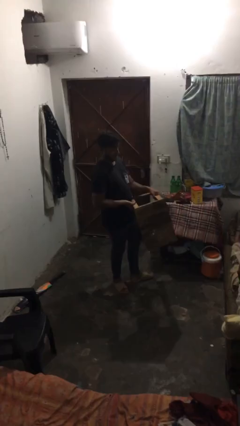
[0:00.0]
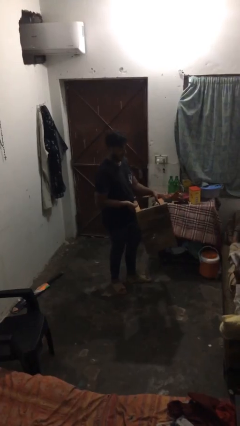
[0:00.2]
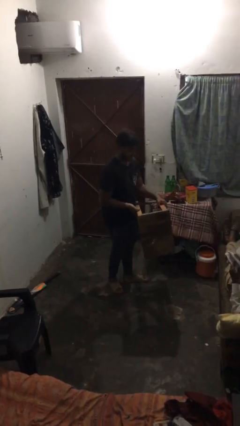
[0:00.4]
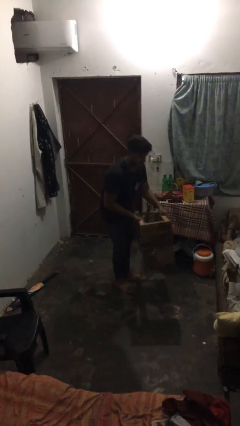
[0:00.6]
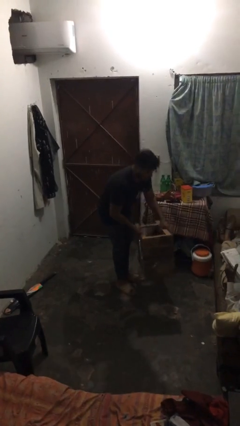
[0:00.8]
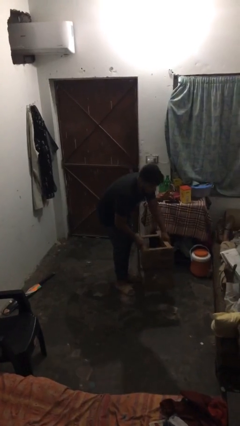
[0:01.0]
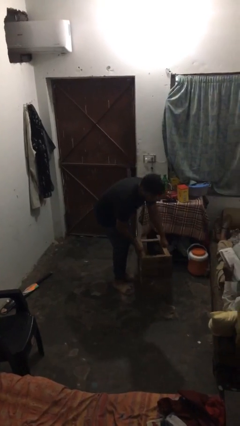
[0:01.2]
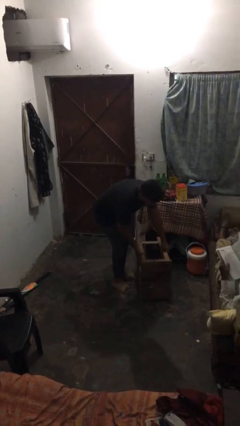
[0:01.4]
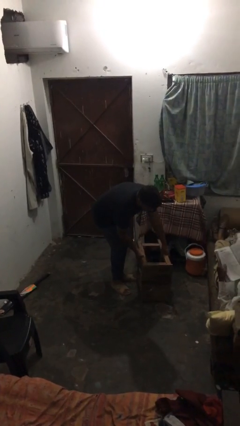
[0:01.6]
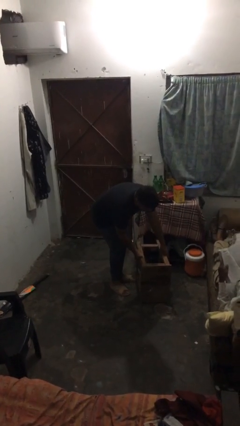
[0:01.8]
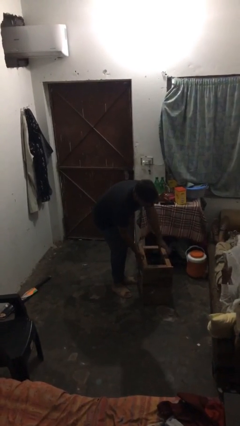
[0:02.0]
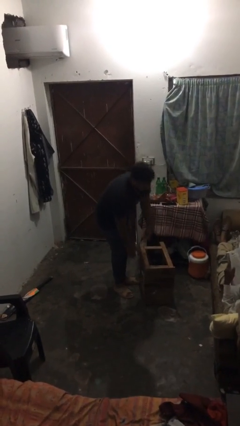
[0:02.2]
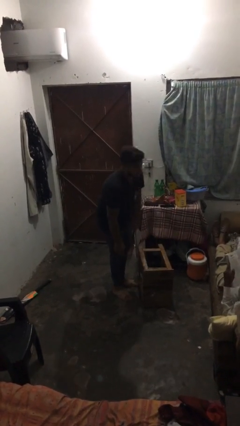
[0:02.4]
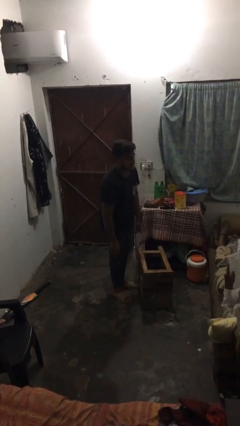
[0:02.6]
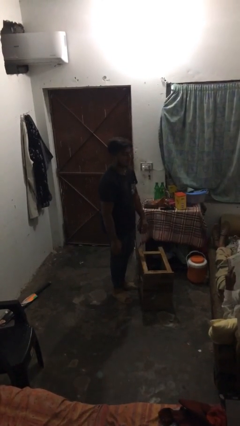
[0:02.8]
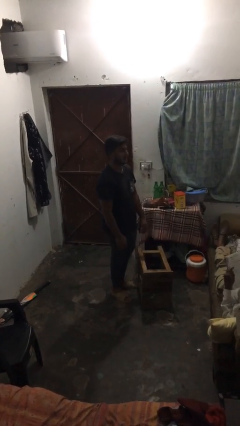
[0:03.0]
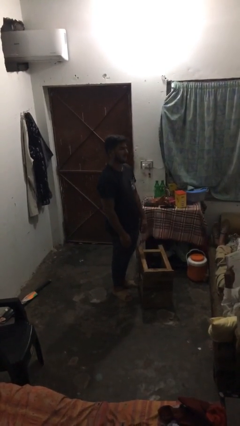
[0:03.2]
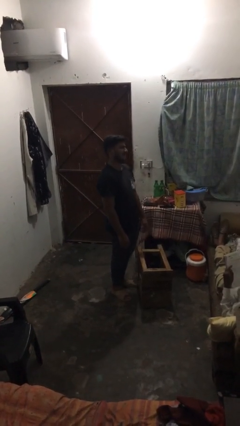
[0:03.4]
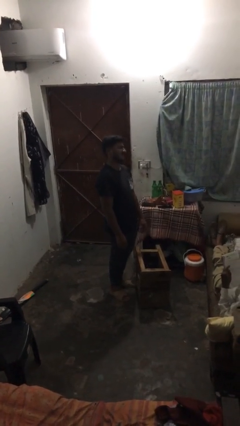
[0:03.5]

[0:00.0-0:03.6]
person puts down object on floor

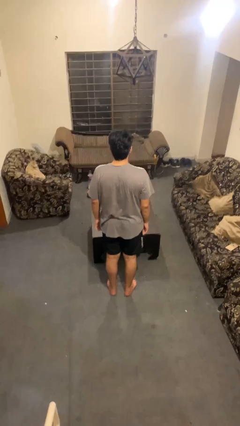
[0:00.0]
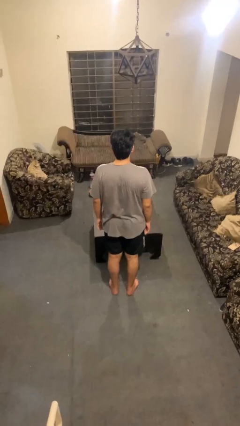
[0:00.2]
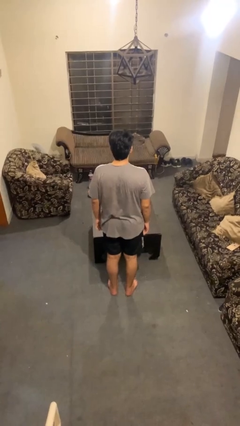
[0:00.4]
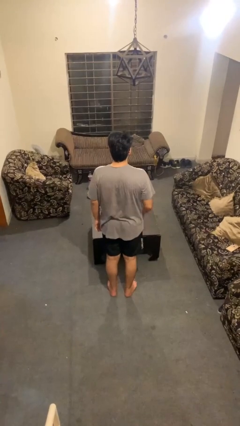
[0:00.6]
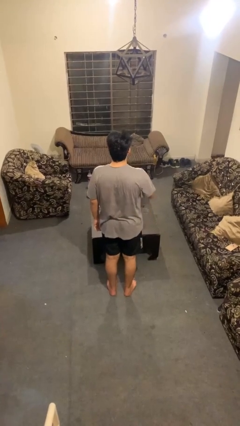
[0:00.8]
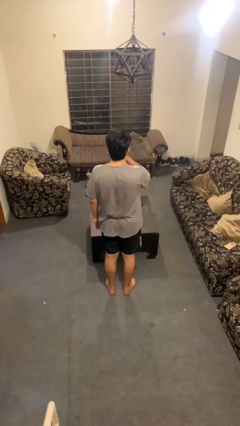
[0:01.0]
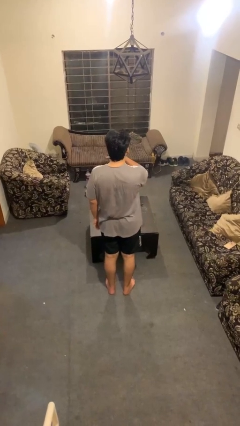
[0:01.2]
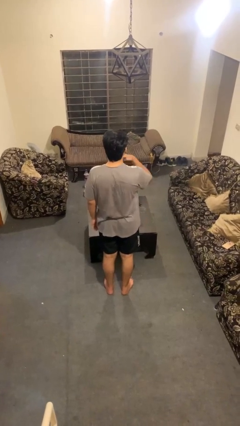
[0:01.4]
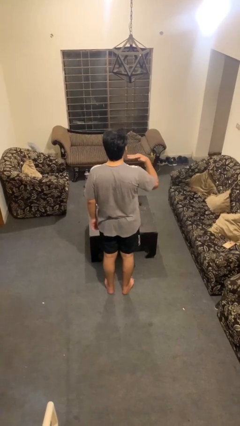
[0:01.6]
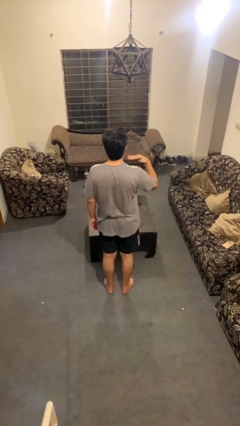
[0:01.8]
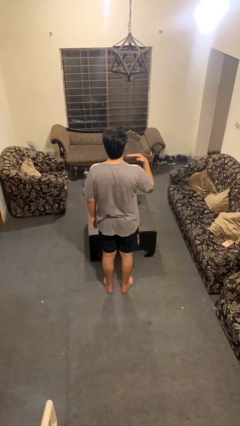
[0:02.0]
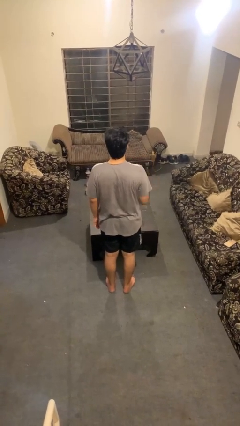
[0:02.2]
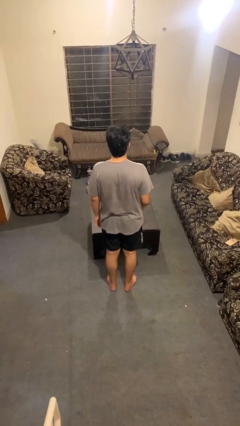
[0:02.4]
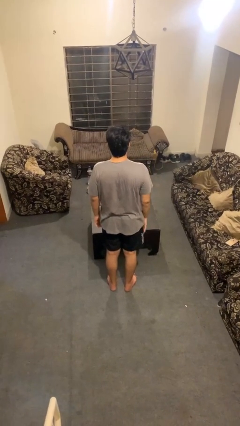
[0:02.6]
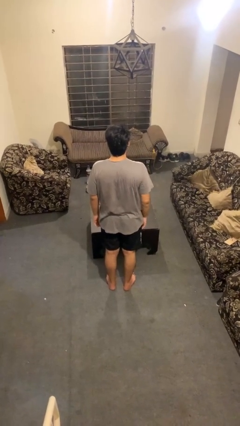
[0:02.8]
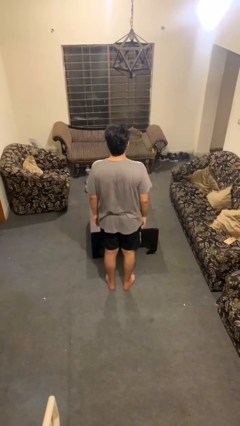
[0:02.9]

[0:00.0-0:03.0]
person gestures cut

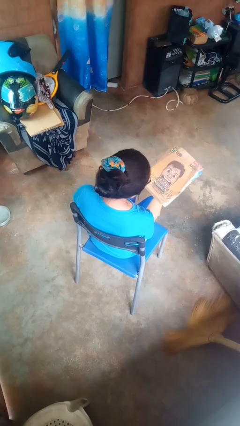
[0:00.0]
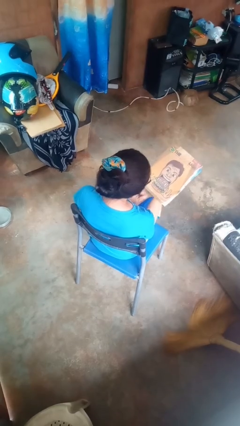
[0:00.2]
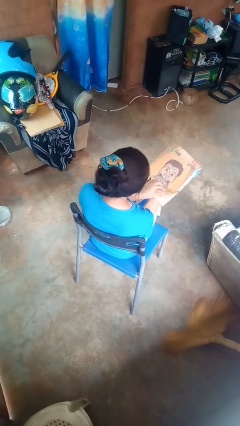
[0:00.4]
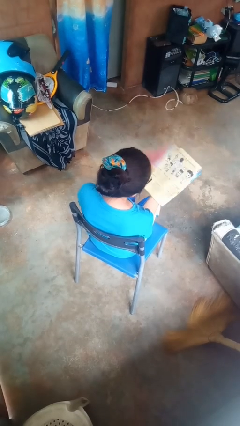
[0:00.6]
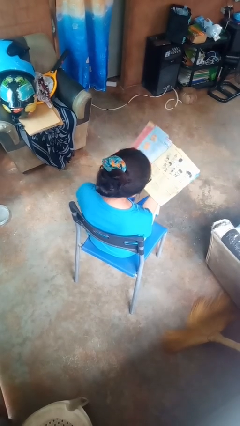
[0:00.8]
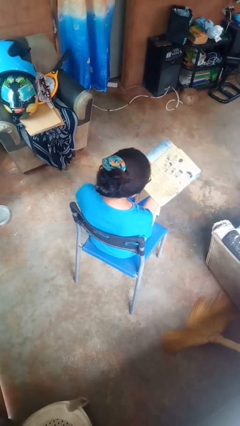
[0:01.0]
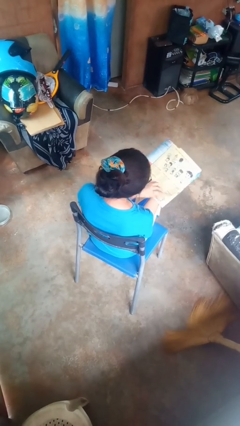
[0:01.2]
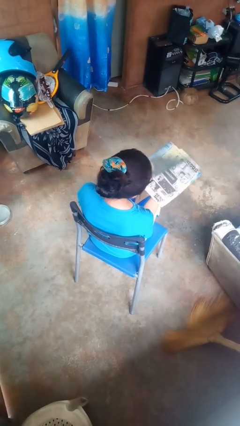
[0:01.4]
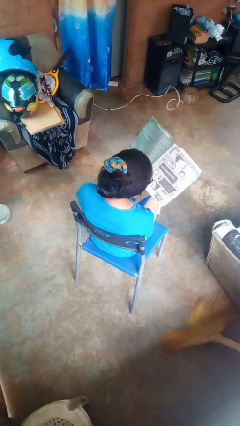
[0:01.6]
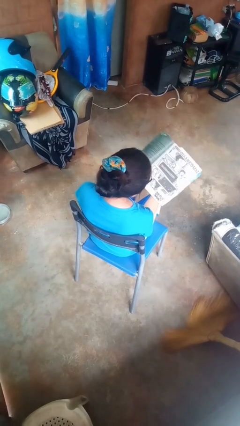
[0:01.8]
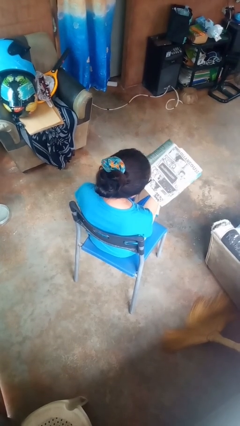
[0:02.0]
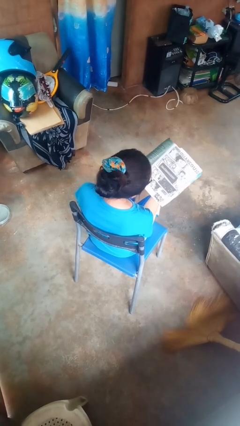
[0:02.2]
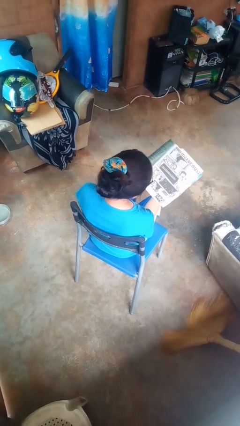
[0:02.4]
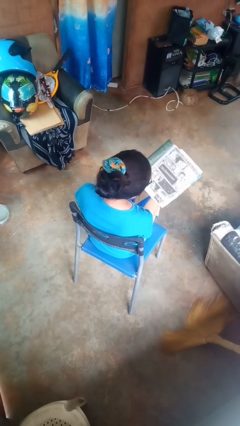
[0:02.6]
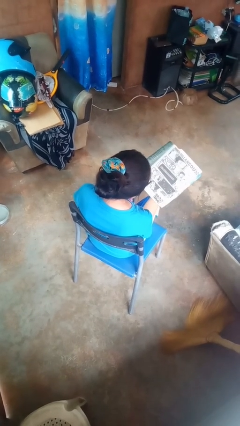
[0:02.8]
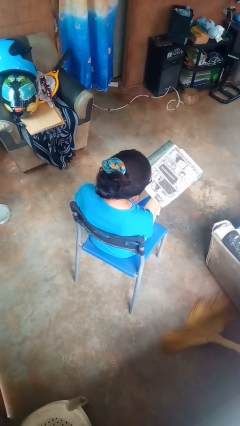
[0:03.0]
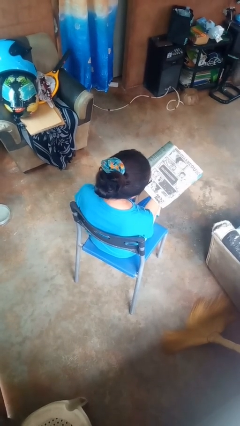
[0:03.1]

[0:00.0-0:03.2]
person reads magazine

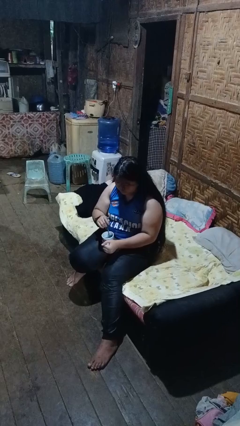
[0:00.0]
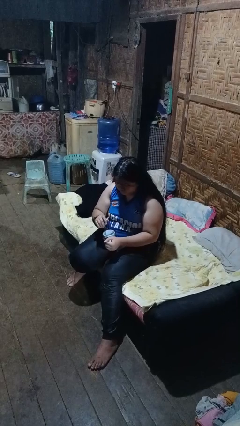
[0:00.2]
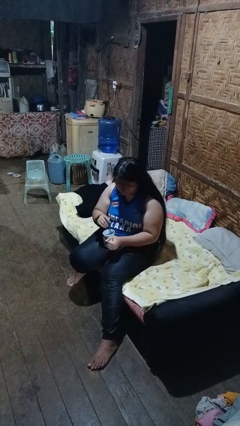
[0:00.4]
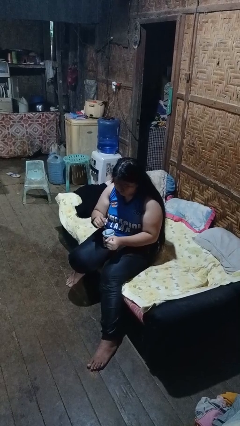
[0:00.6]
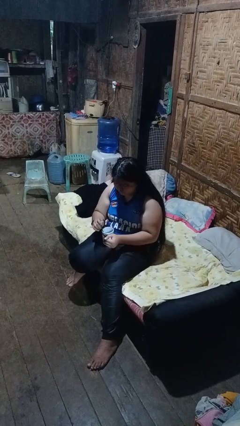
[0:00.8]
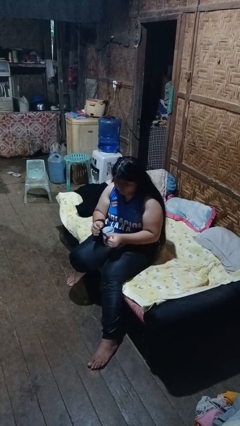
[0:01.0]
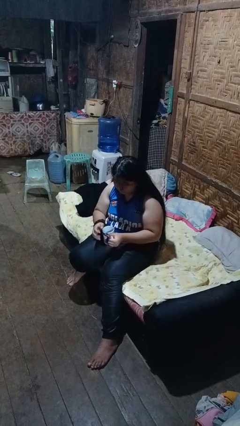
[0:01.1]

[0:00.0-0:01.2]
person stirs mug

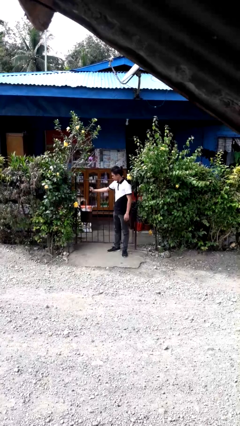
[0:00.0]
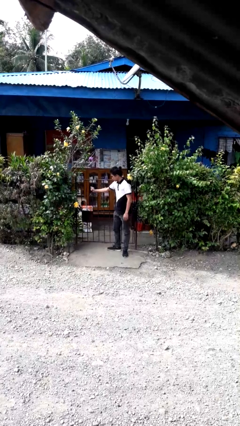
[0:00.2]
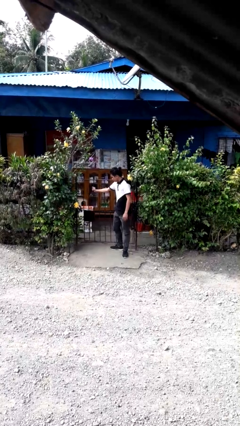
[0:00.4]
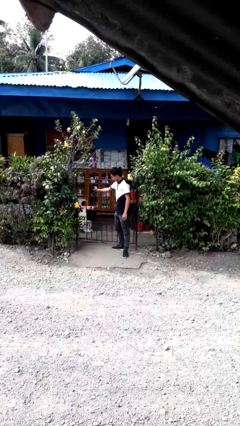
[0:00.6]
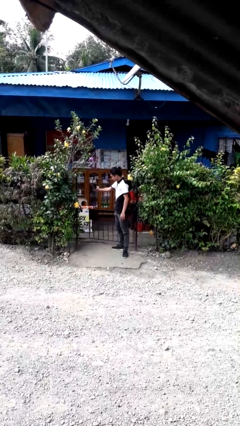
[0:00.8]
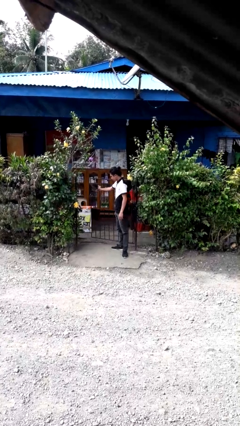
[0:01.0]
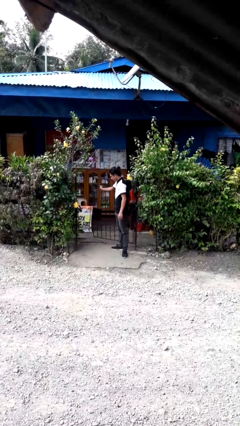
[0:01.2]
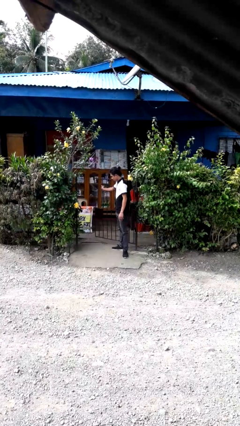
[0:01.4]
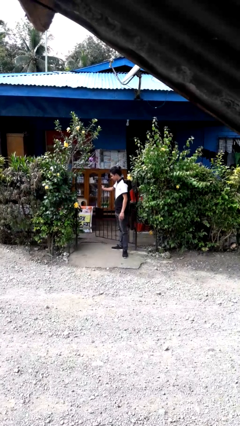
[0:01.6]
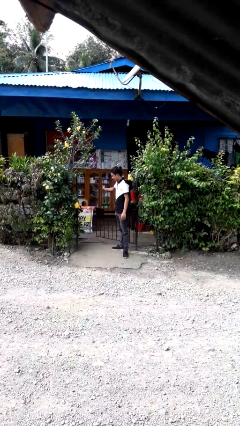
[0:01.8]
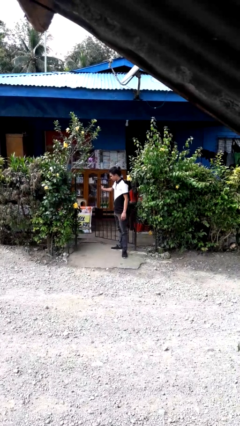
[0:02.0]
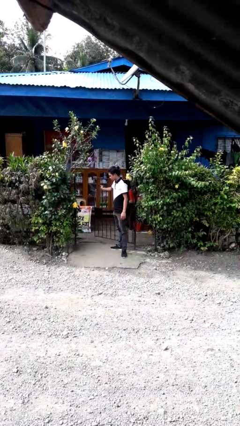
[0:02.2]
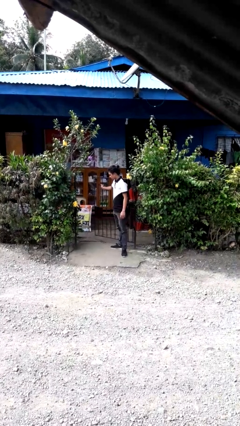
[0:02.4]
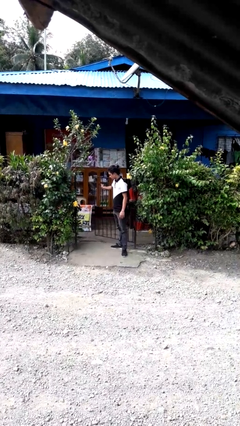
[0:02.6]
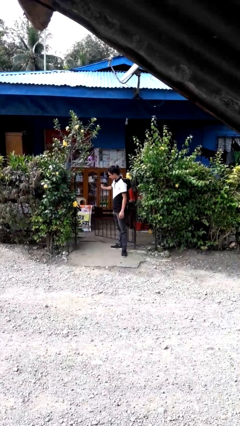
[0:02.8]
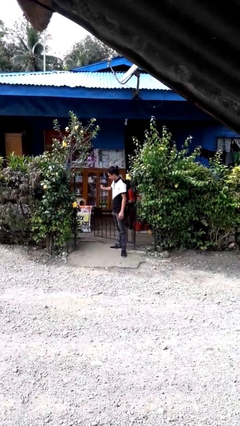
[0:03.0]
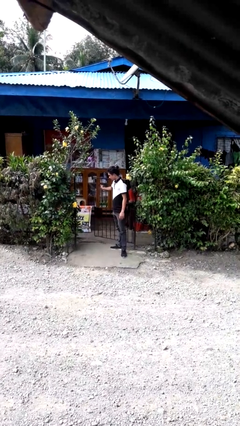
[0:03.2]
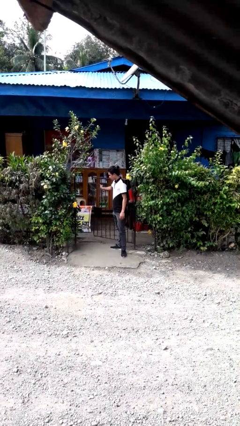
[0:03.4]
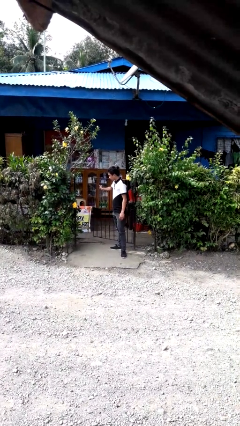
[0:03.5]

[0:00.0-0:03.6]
person opens gate

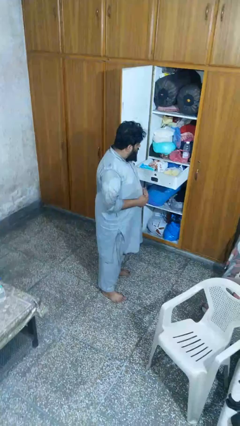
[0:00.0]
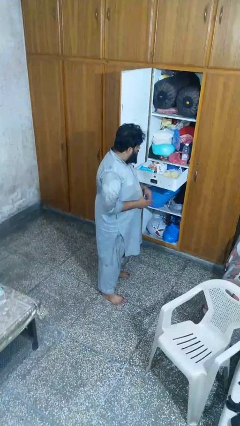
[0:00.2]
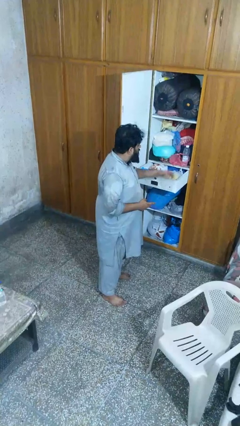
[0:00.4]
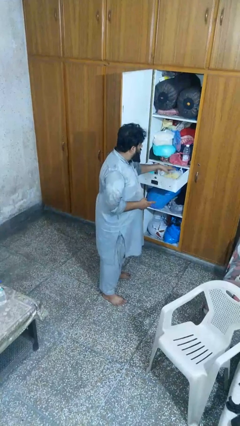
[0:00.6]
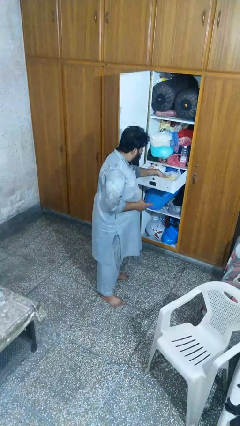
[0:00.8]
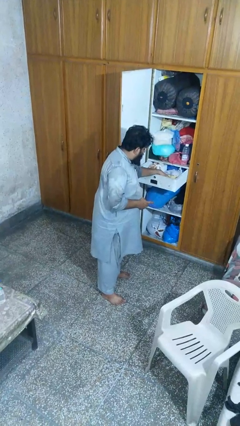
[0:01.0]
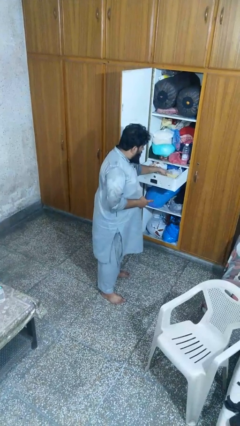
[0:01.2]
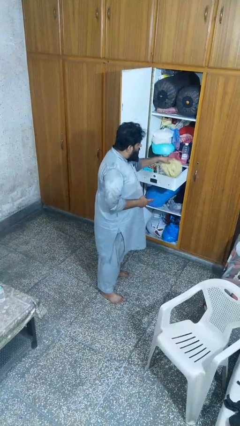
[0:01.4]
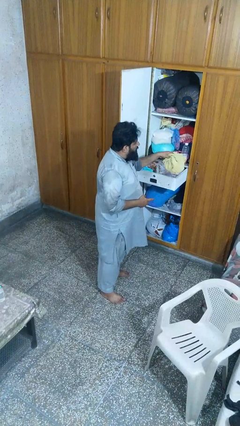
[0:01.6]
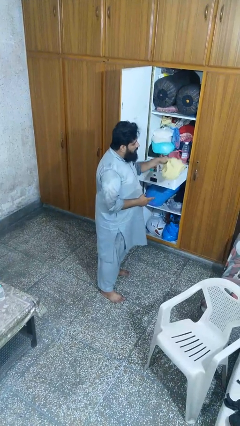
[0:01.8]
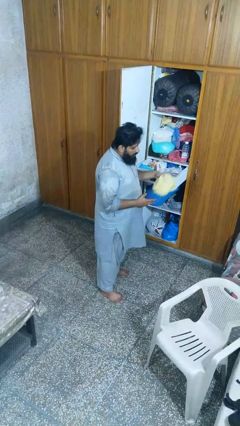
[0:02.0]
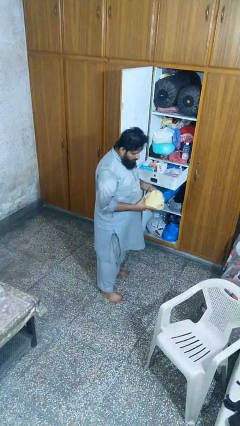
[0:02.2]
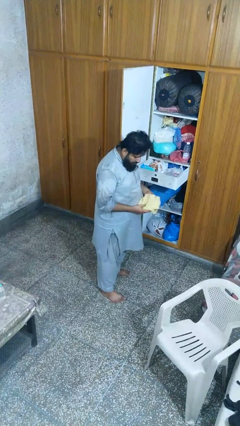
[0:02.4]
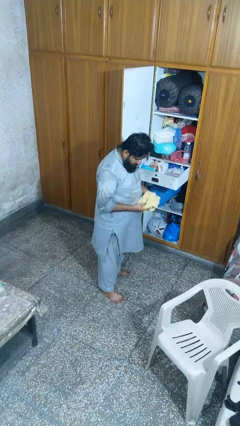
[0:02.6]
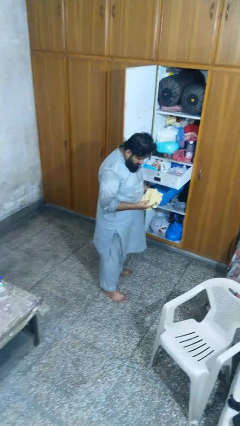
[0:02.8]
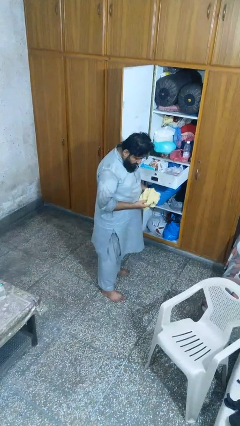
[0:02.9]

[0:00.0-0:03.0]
person takes clothes from dresser
